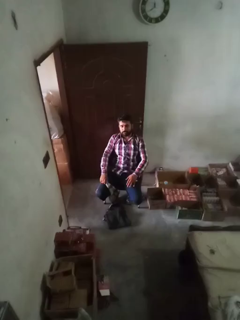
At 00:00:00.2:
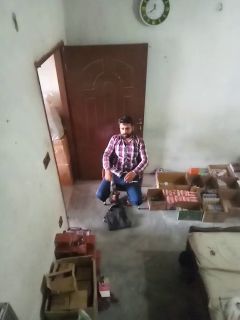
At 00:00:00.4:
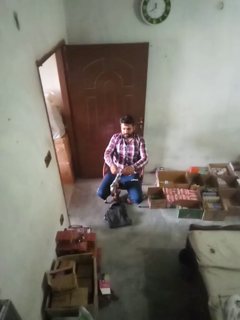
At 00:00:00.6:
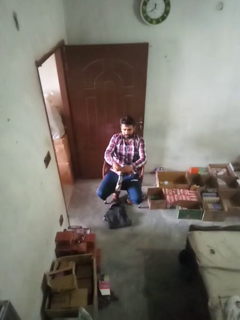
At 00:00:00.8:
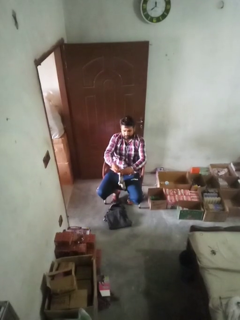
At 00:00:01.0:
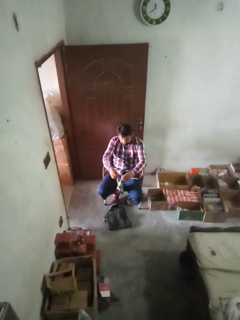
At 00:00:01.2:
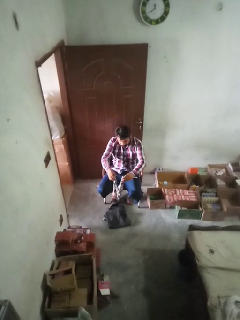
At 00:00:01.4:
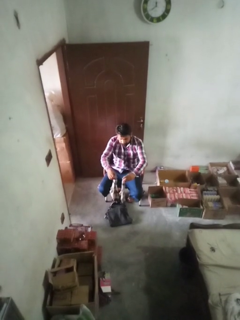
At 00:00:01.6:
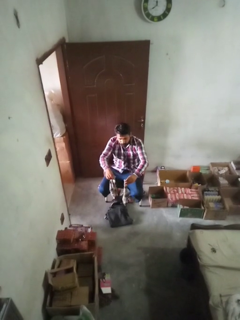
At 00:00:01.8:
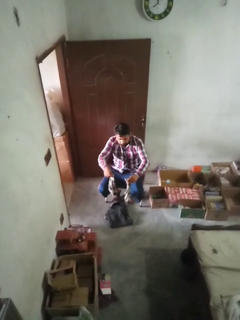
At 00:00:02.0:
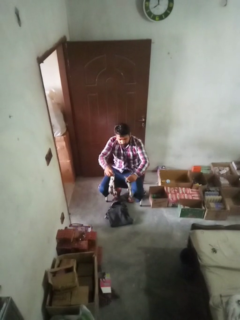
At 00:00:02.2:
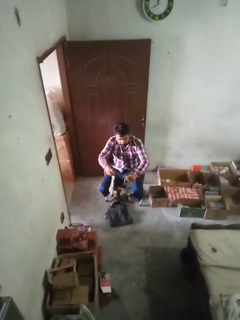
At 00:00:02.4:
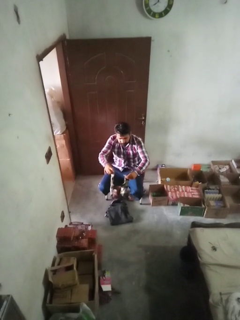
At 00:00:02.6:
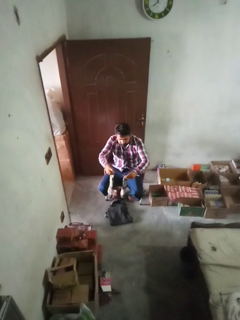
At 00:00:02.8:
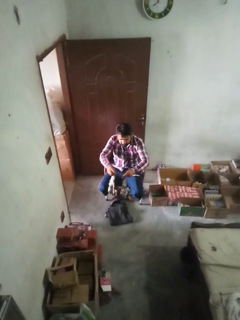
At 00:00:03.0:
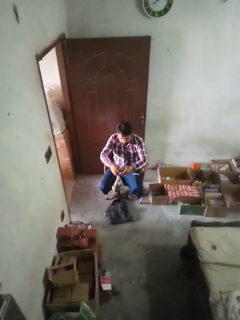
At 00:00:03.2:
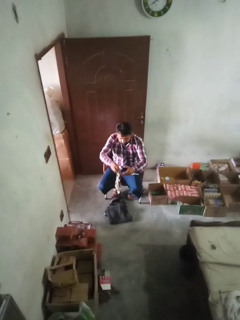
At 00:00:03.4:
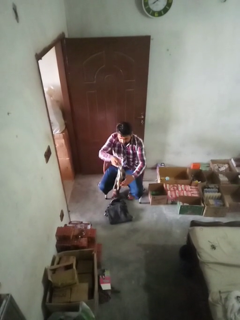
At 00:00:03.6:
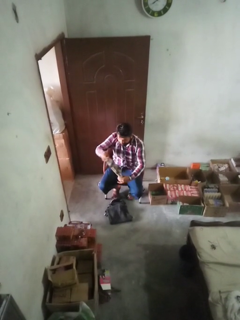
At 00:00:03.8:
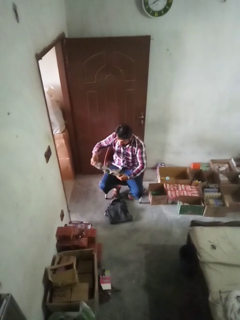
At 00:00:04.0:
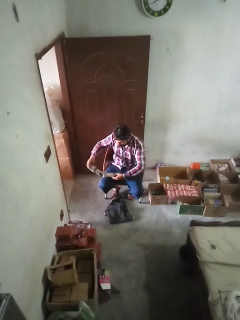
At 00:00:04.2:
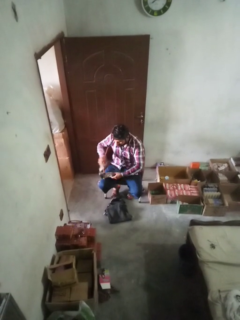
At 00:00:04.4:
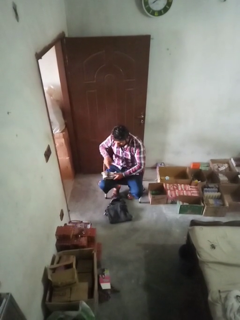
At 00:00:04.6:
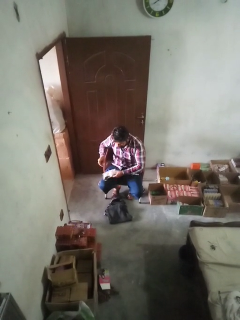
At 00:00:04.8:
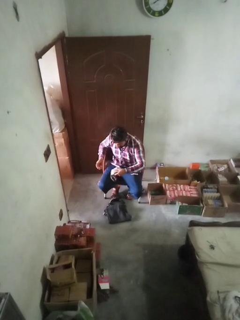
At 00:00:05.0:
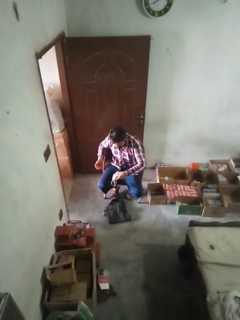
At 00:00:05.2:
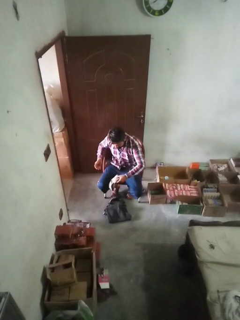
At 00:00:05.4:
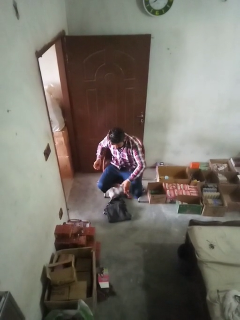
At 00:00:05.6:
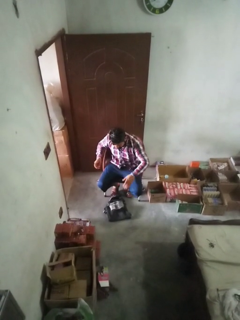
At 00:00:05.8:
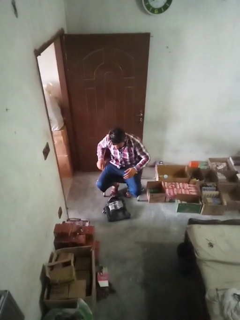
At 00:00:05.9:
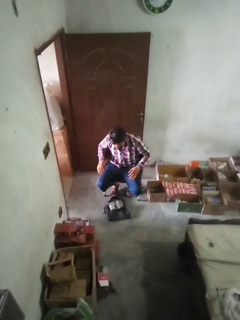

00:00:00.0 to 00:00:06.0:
person folds socks

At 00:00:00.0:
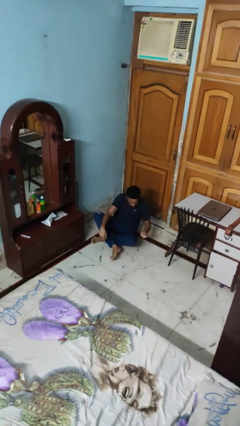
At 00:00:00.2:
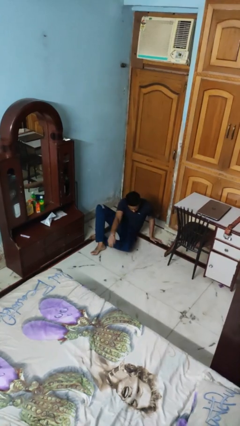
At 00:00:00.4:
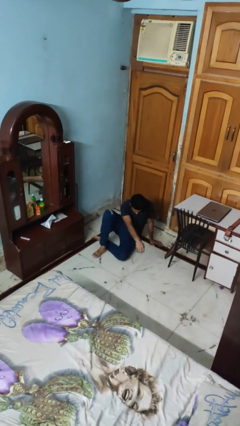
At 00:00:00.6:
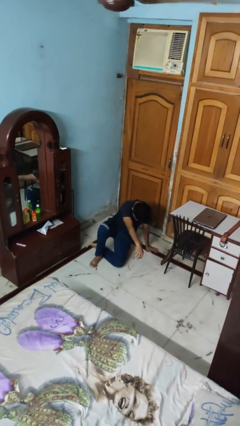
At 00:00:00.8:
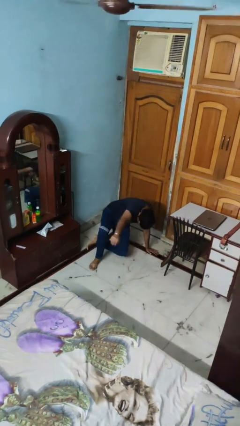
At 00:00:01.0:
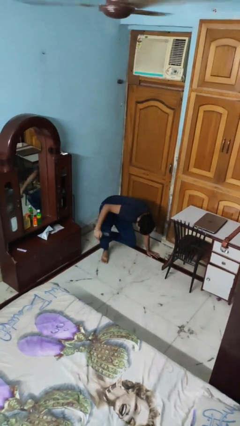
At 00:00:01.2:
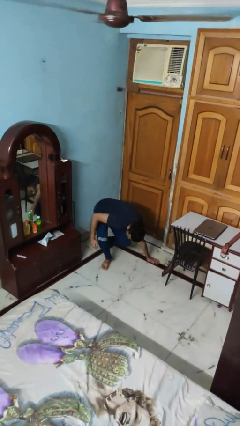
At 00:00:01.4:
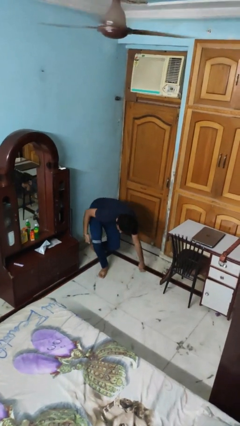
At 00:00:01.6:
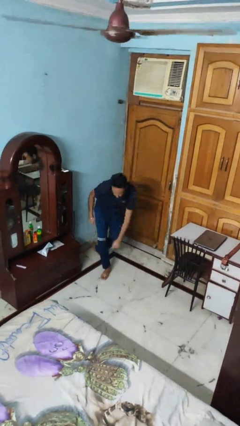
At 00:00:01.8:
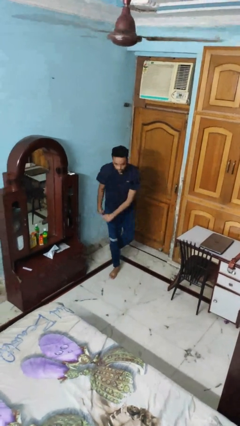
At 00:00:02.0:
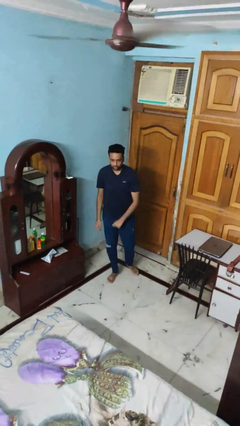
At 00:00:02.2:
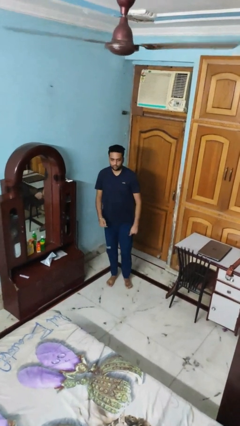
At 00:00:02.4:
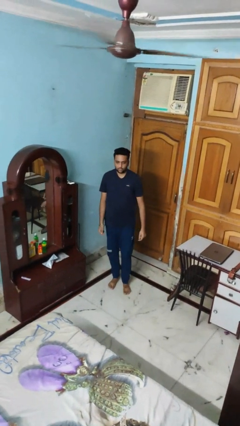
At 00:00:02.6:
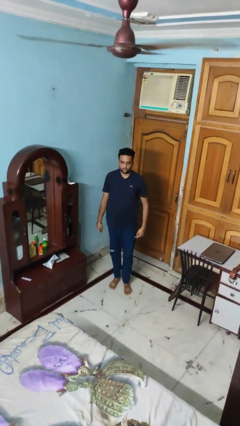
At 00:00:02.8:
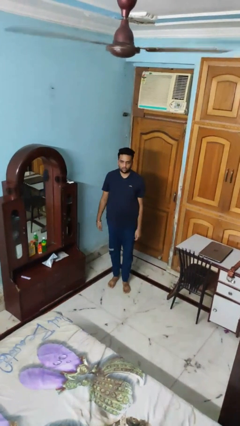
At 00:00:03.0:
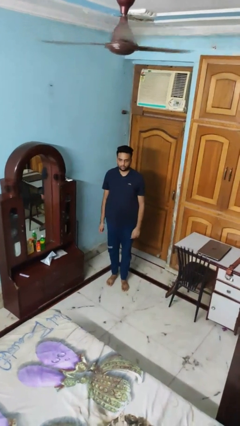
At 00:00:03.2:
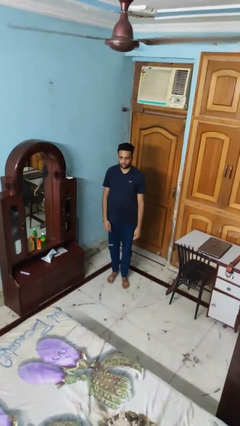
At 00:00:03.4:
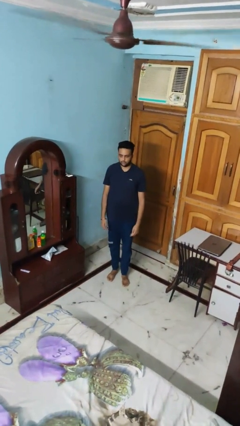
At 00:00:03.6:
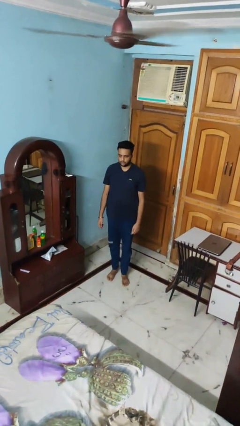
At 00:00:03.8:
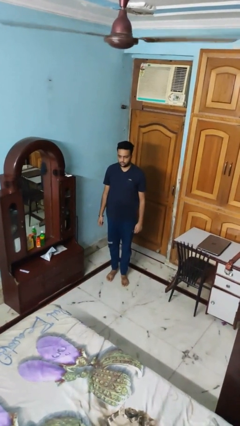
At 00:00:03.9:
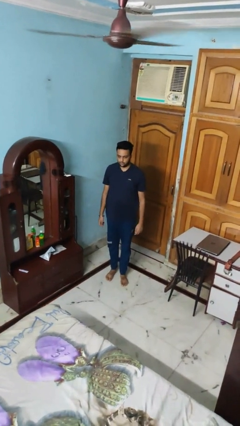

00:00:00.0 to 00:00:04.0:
person stands up from floor

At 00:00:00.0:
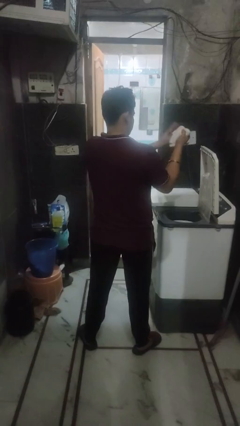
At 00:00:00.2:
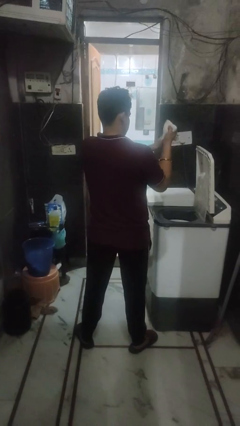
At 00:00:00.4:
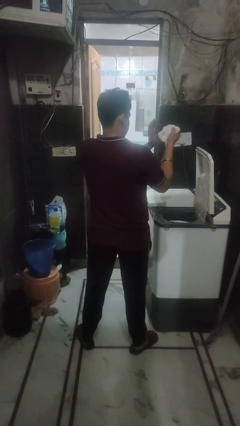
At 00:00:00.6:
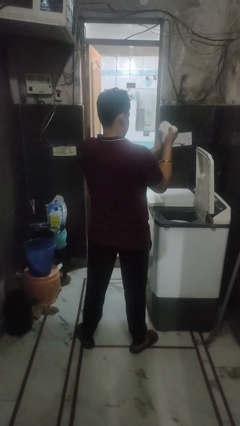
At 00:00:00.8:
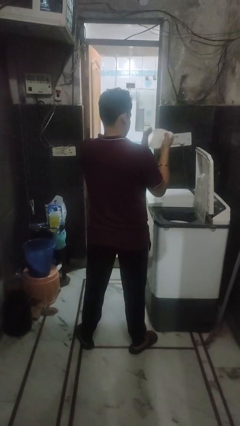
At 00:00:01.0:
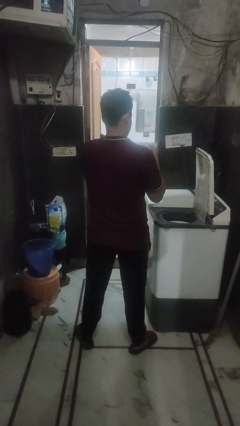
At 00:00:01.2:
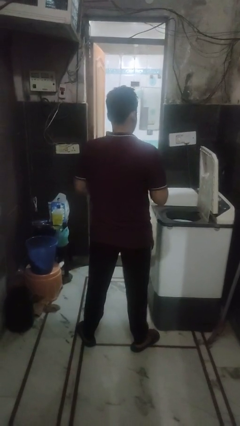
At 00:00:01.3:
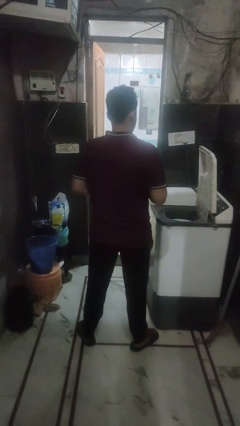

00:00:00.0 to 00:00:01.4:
person cleans dryer lint trap

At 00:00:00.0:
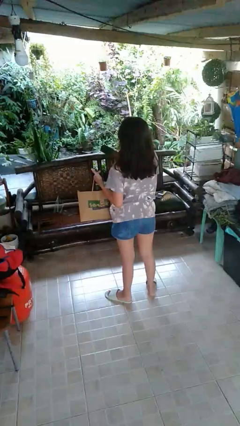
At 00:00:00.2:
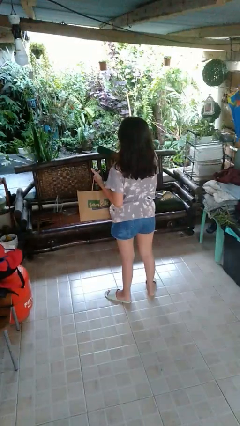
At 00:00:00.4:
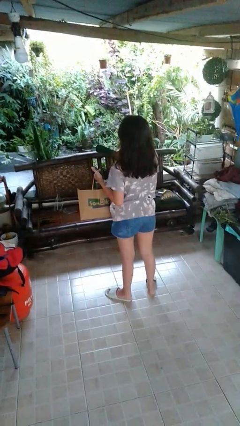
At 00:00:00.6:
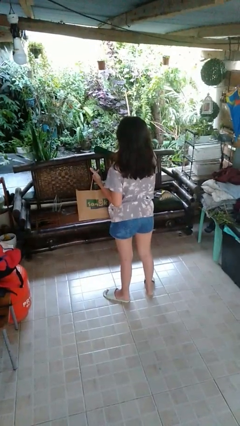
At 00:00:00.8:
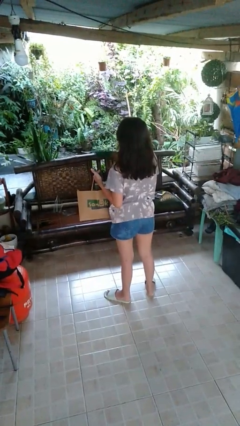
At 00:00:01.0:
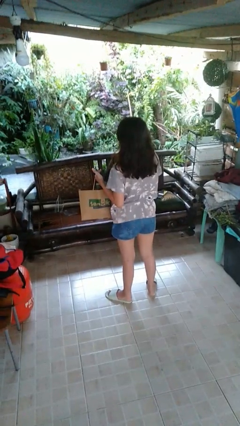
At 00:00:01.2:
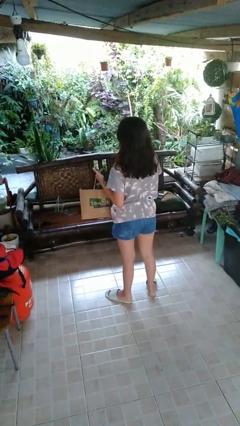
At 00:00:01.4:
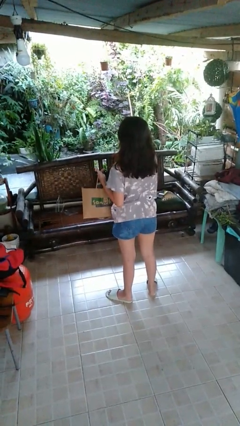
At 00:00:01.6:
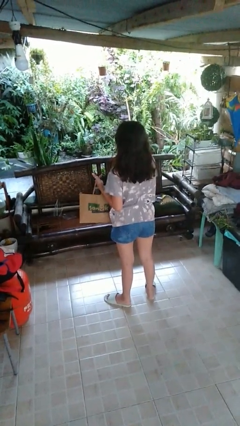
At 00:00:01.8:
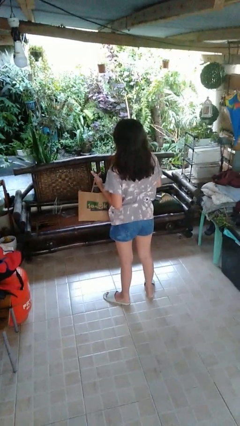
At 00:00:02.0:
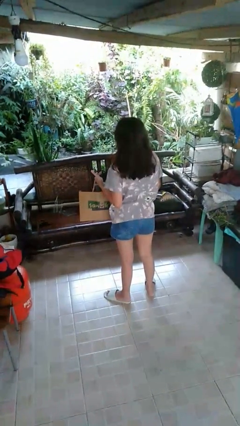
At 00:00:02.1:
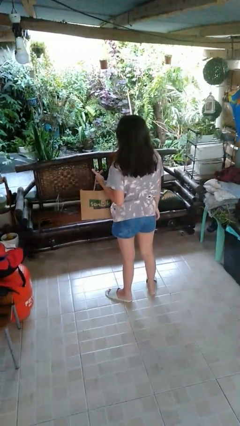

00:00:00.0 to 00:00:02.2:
person puts object into bag

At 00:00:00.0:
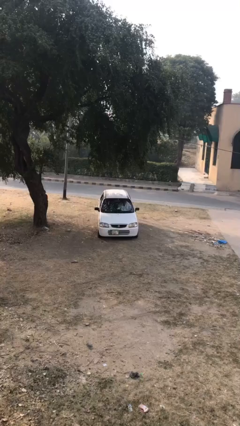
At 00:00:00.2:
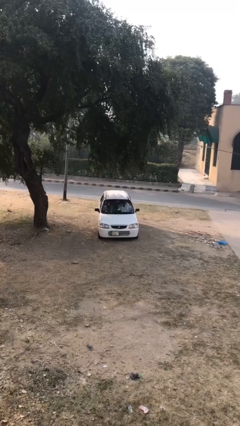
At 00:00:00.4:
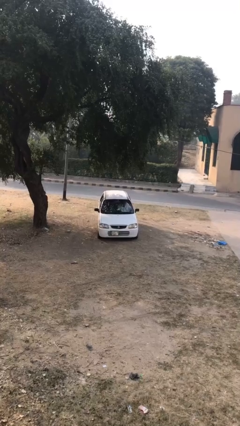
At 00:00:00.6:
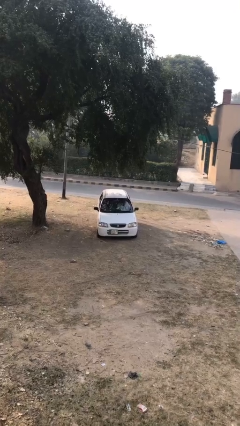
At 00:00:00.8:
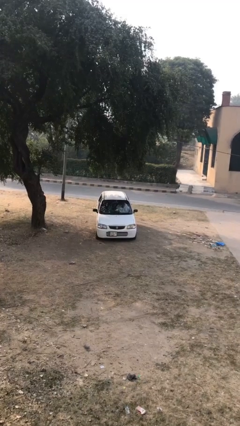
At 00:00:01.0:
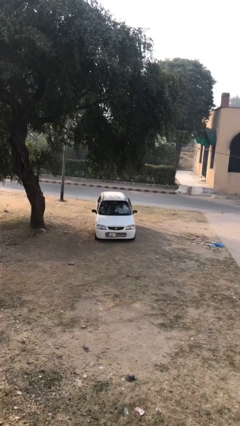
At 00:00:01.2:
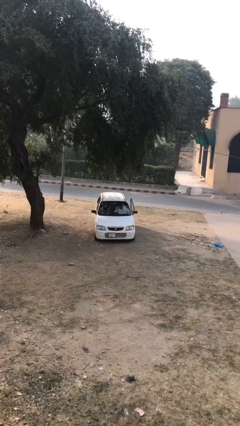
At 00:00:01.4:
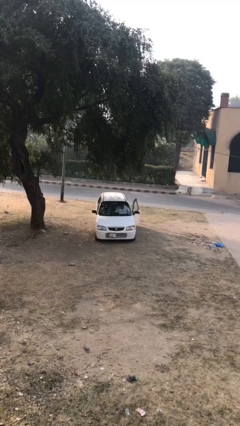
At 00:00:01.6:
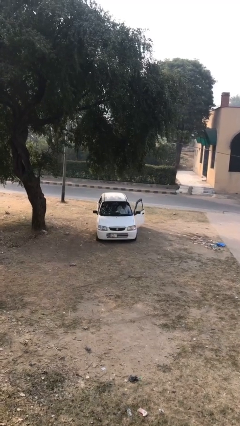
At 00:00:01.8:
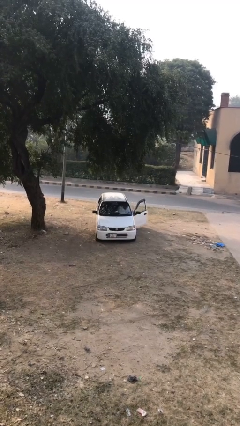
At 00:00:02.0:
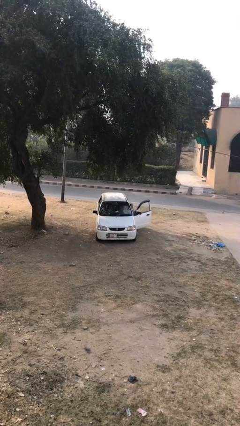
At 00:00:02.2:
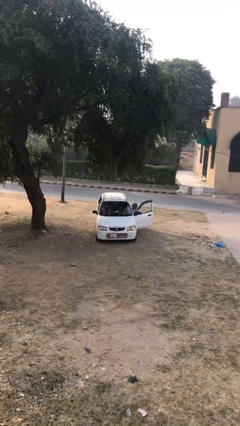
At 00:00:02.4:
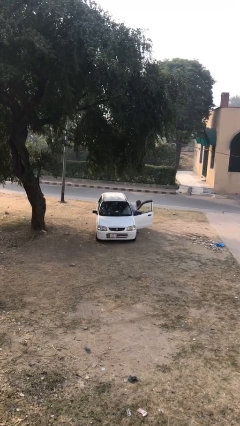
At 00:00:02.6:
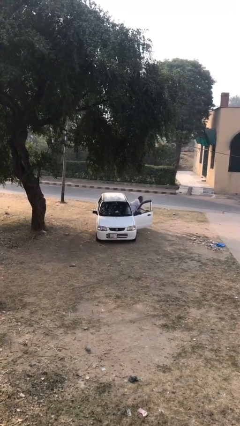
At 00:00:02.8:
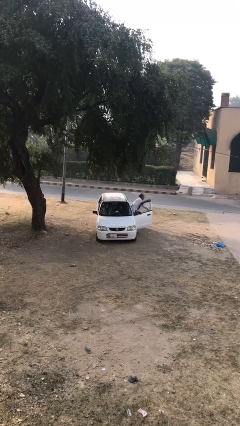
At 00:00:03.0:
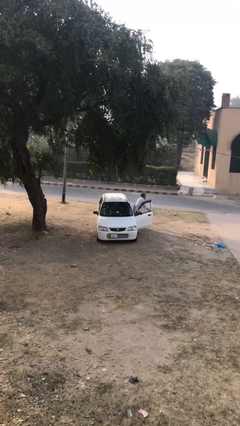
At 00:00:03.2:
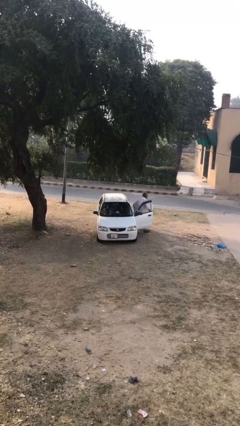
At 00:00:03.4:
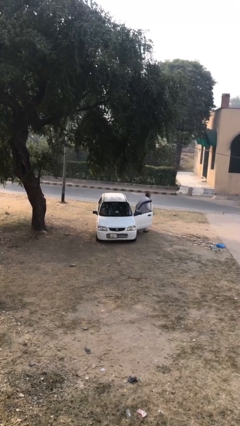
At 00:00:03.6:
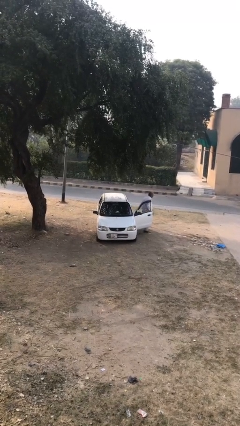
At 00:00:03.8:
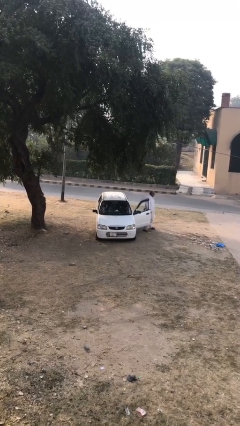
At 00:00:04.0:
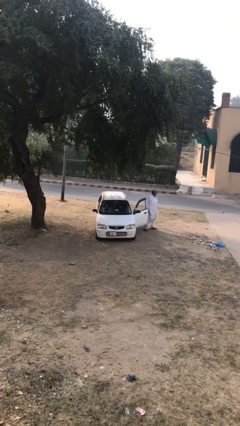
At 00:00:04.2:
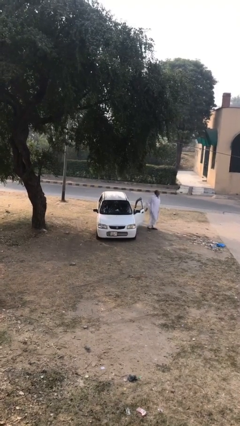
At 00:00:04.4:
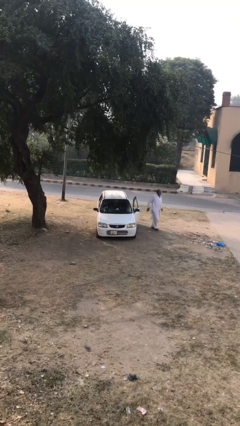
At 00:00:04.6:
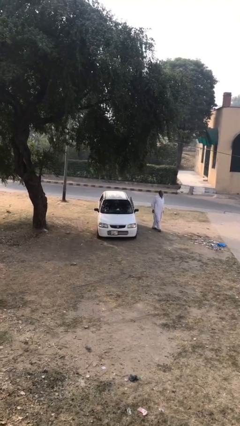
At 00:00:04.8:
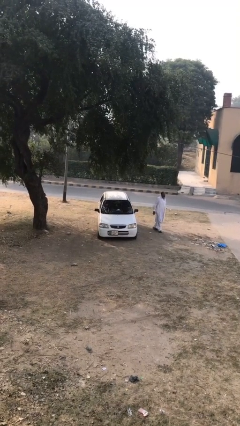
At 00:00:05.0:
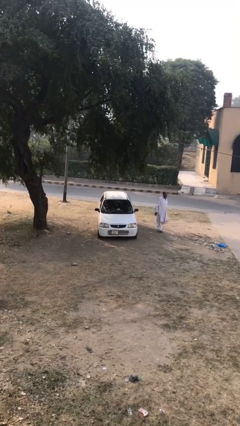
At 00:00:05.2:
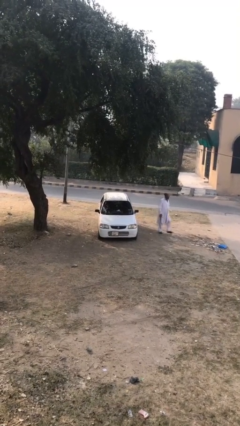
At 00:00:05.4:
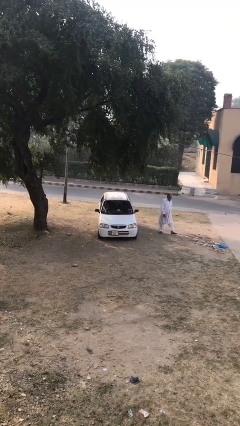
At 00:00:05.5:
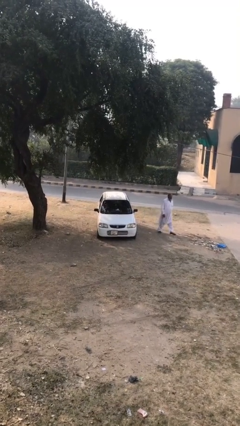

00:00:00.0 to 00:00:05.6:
car drops off person
